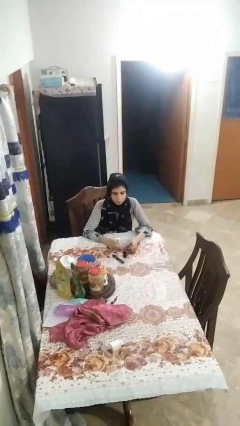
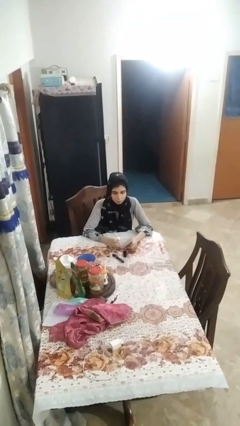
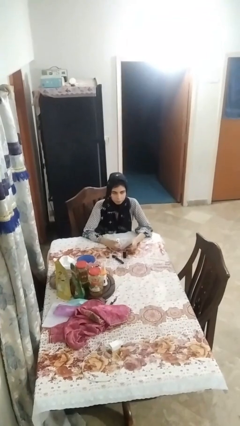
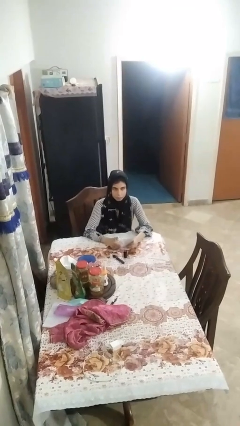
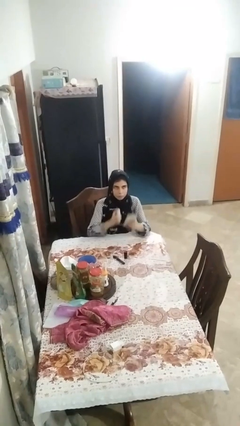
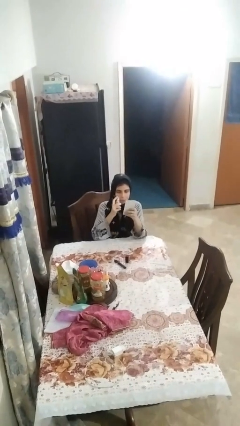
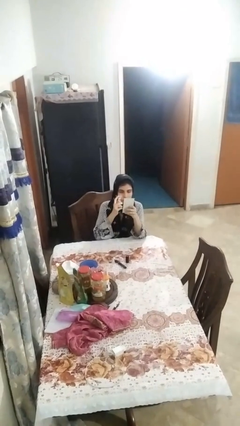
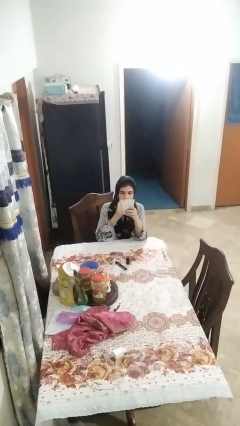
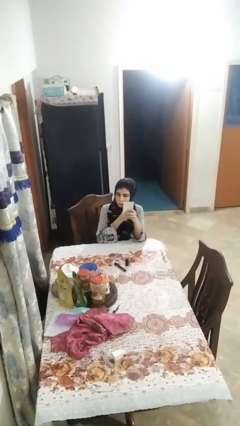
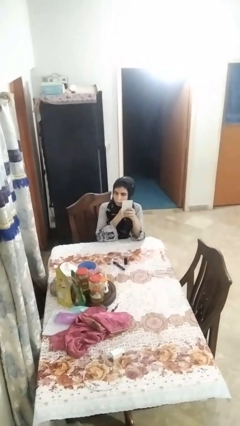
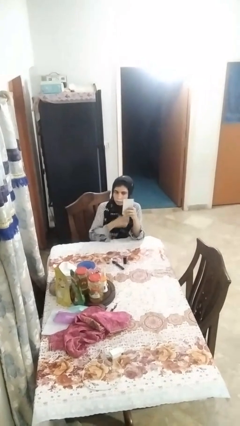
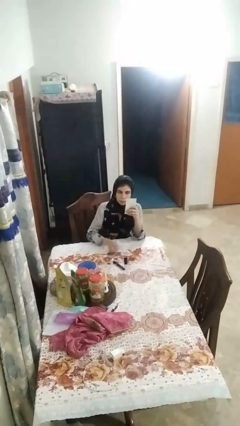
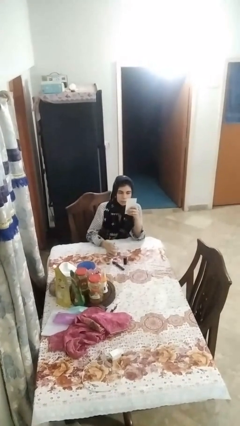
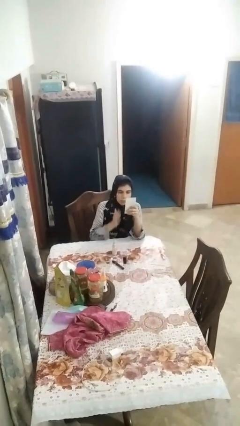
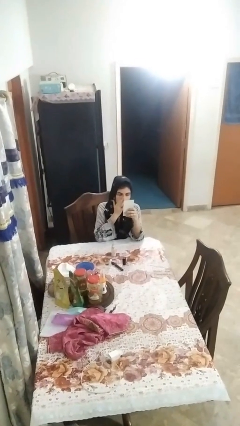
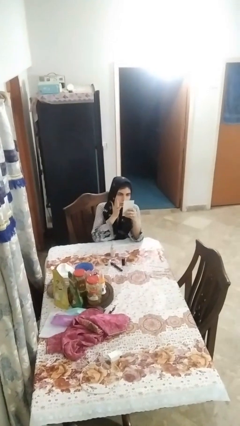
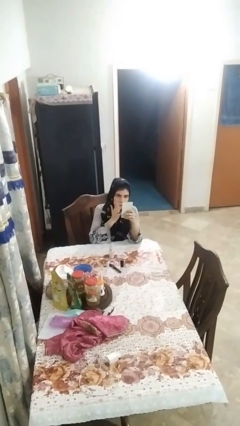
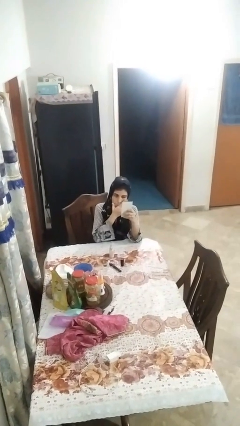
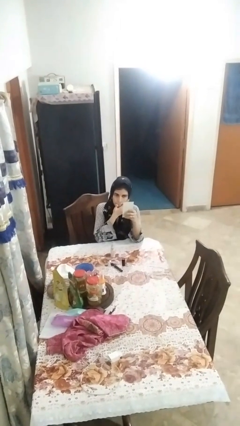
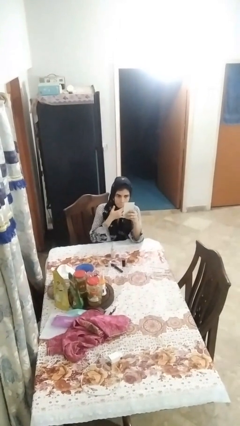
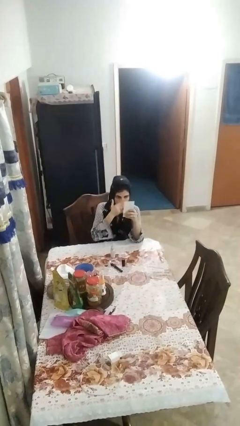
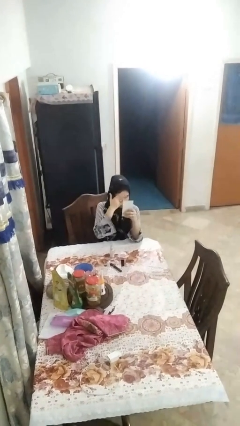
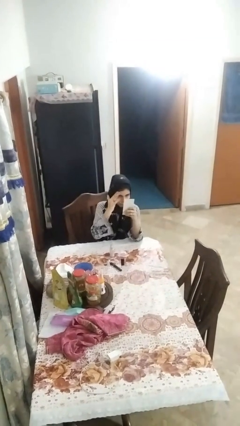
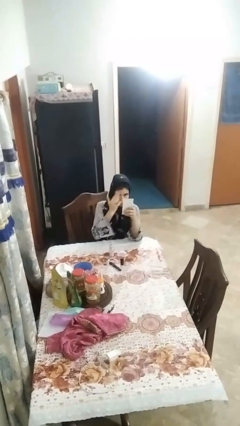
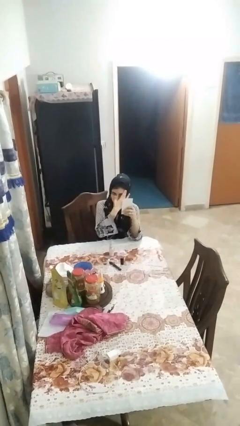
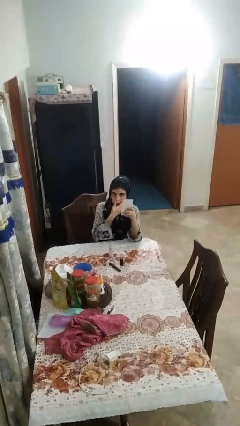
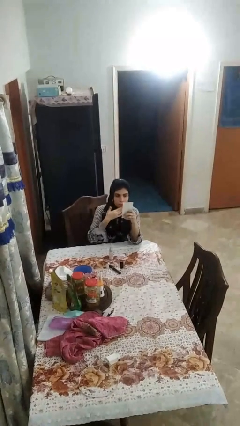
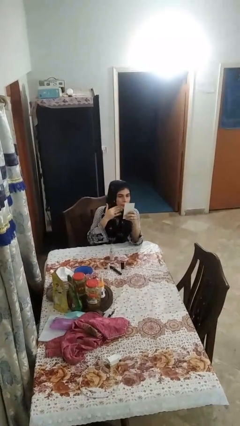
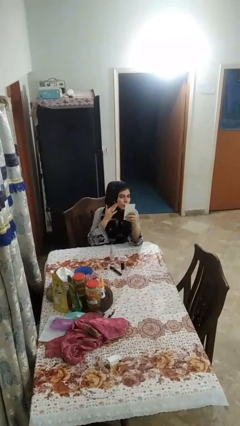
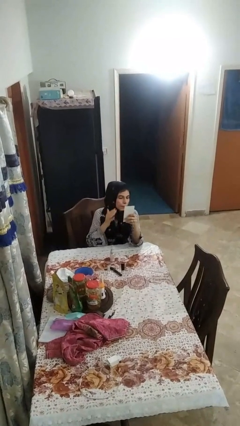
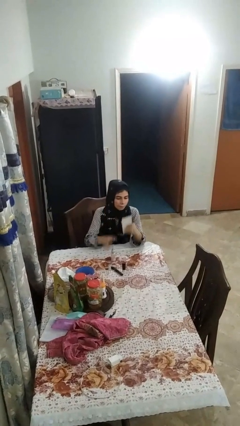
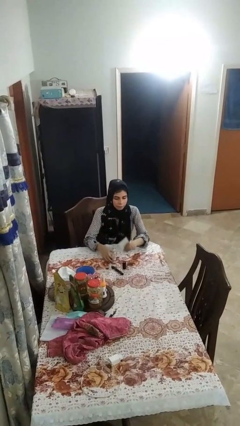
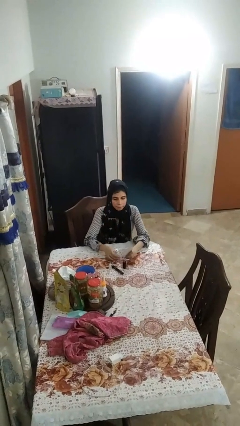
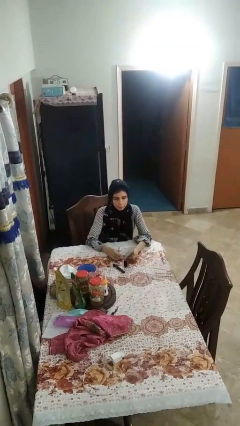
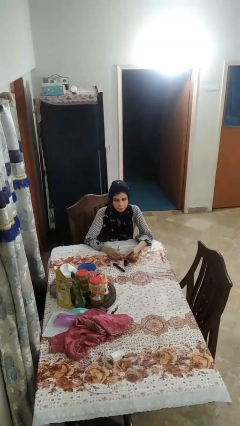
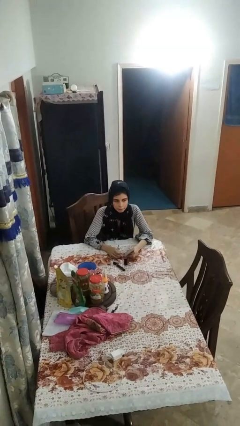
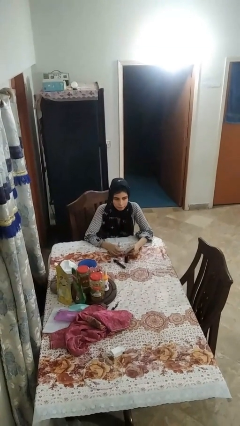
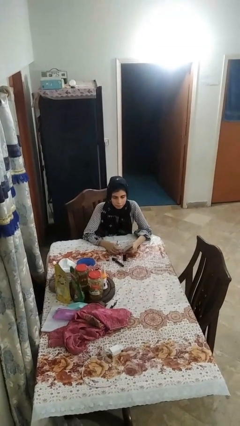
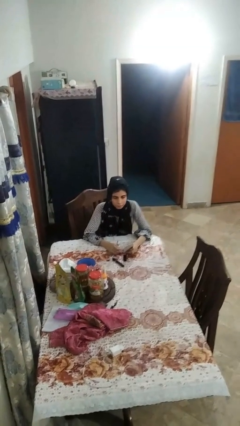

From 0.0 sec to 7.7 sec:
person applies foundation makeup

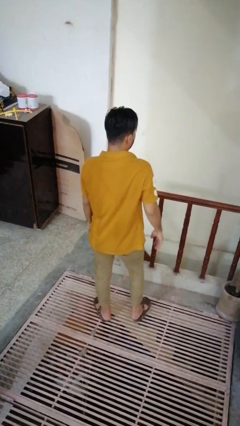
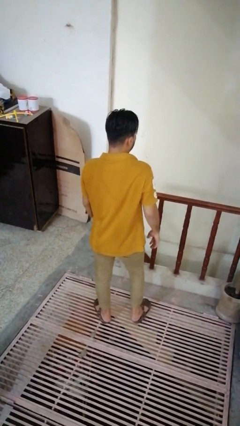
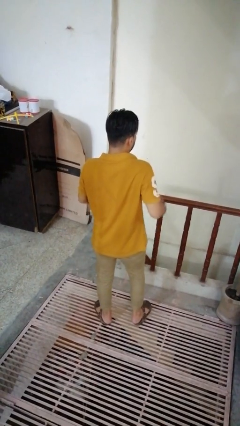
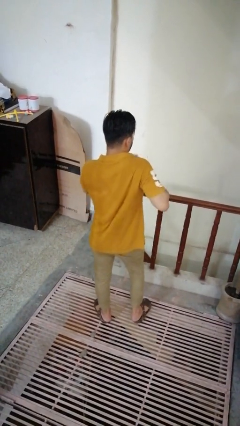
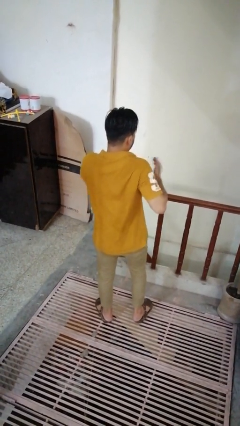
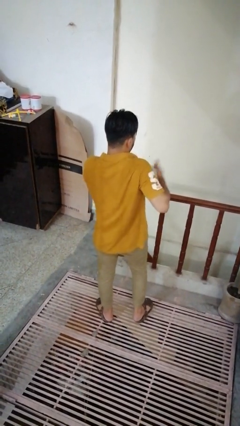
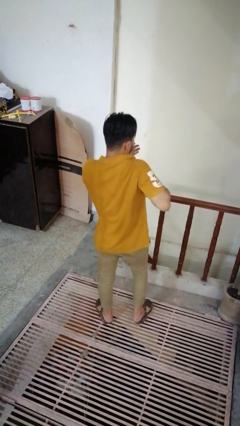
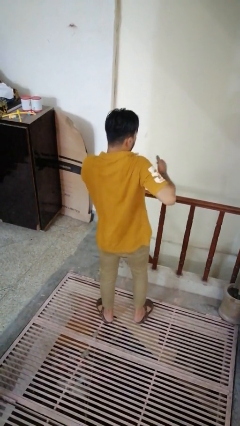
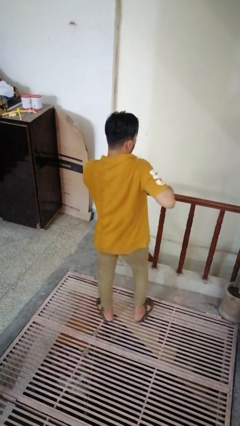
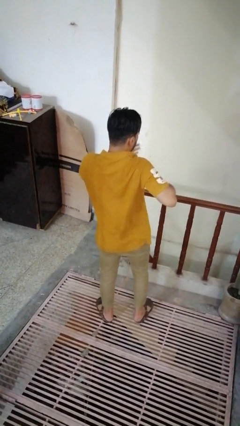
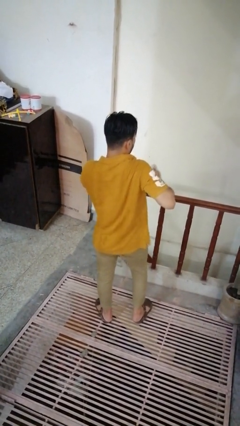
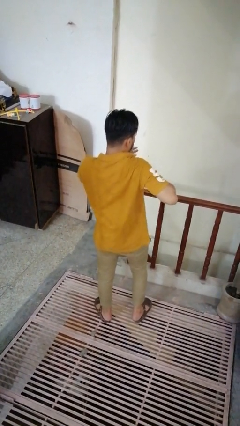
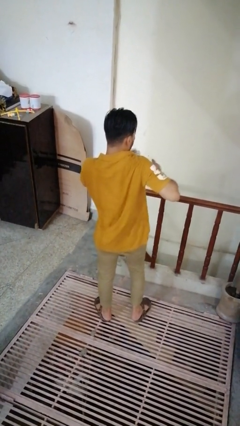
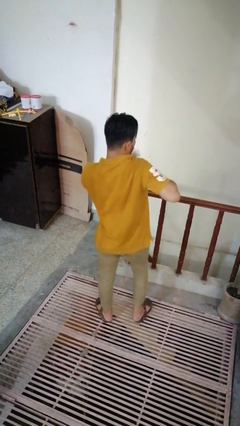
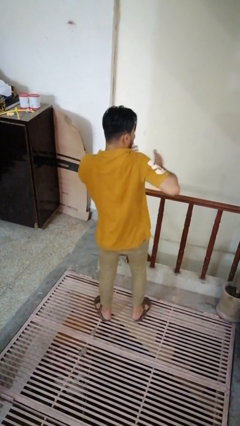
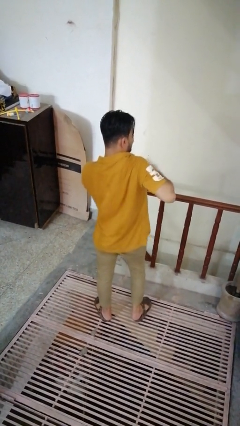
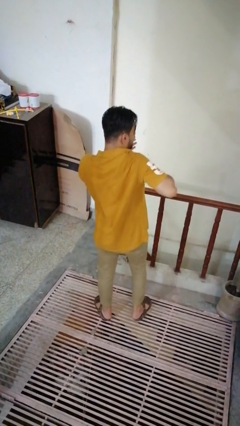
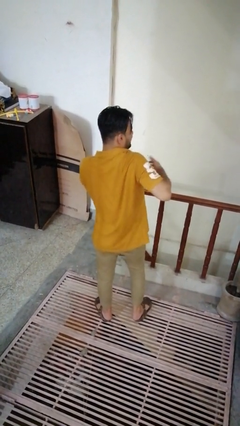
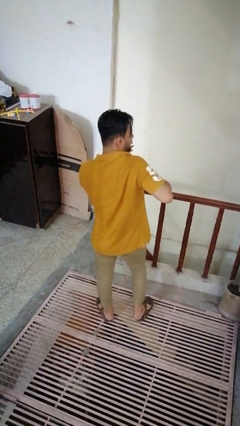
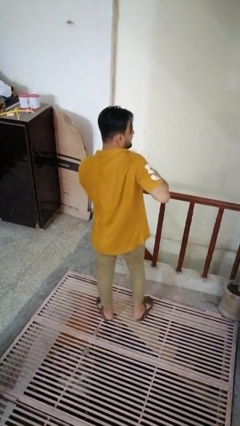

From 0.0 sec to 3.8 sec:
person drums on chest

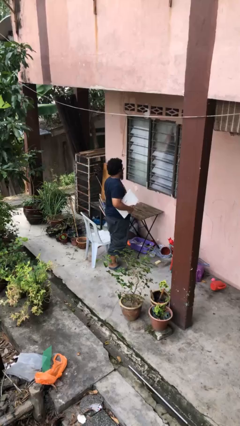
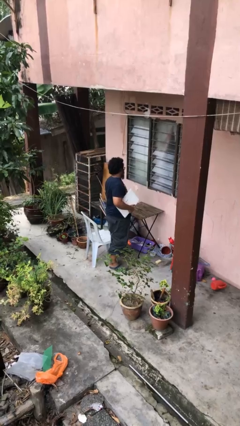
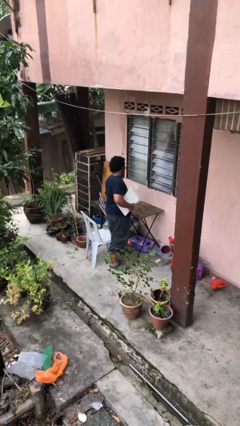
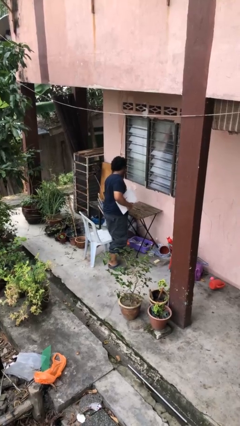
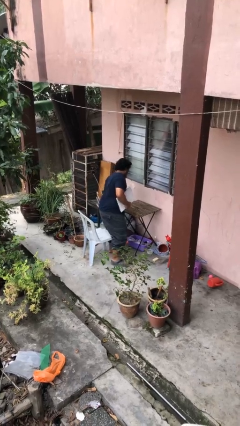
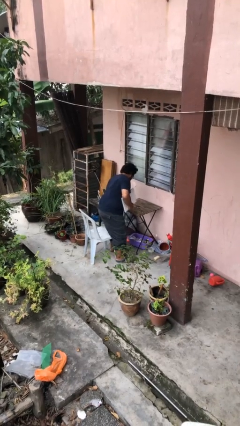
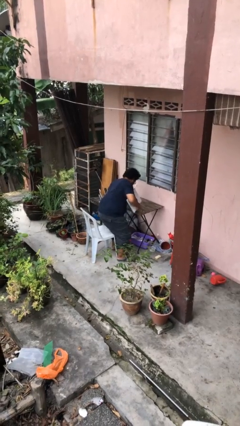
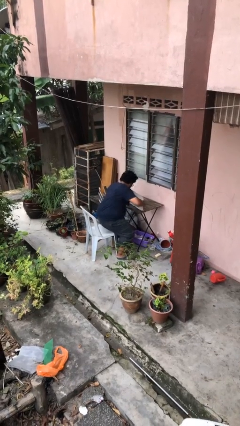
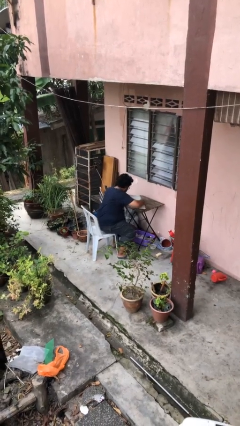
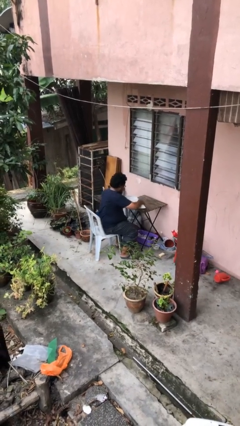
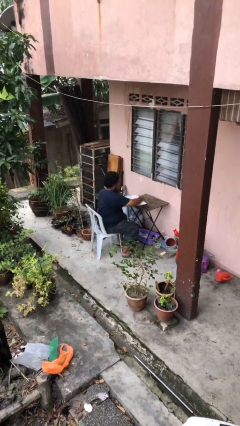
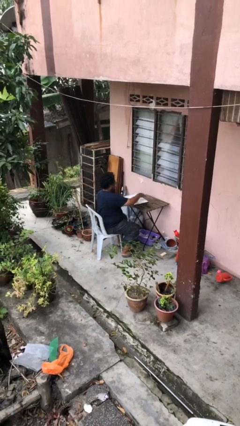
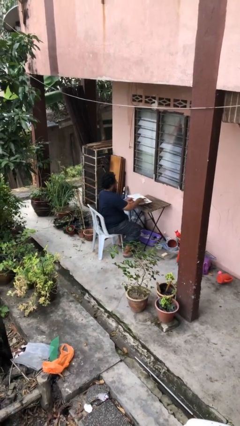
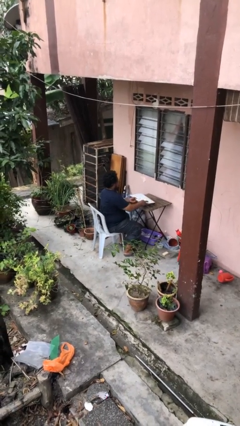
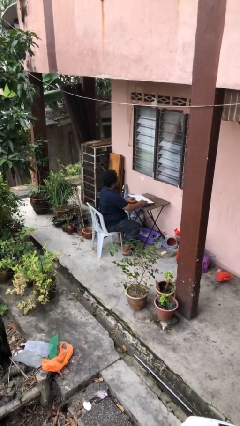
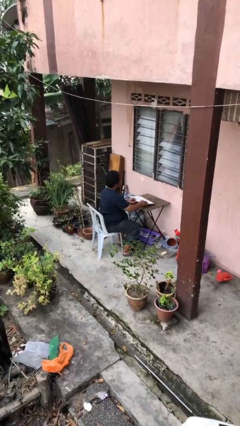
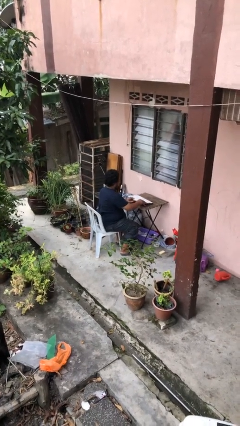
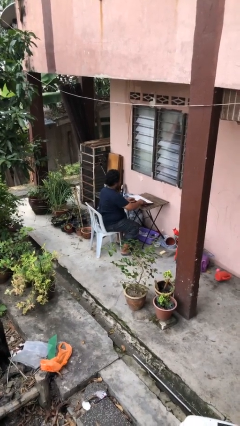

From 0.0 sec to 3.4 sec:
person sits down

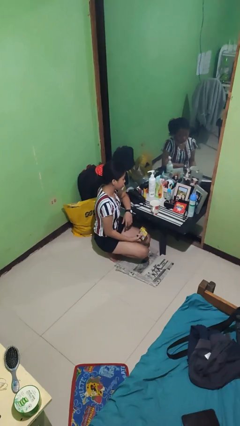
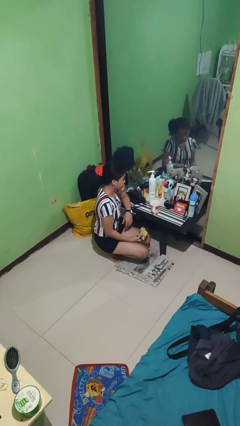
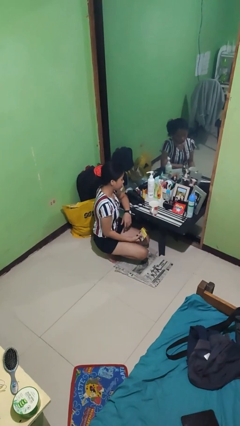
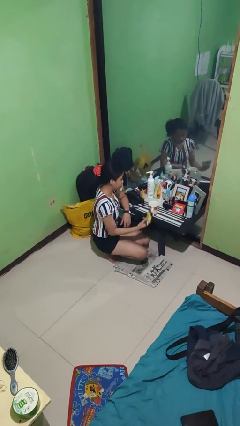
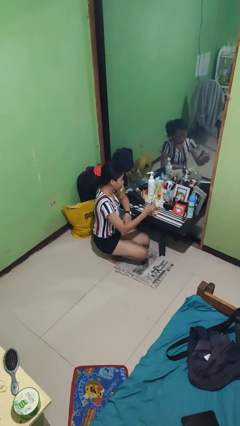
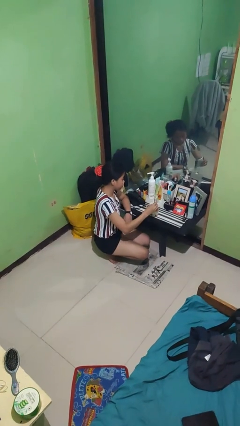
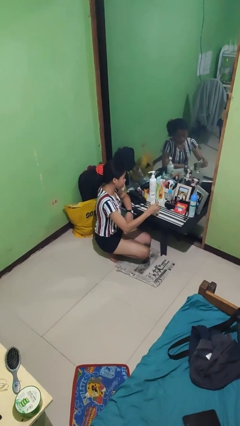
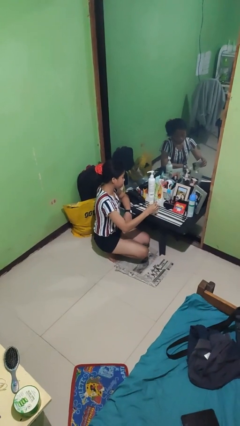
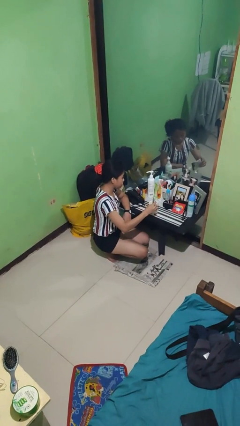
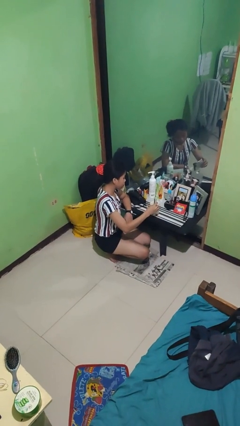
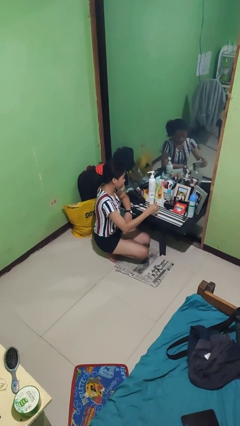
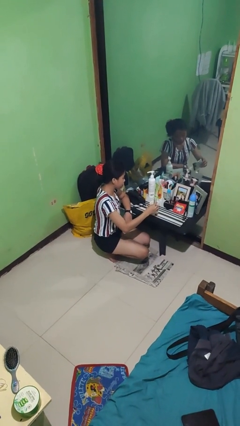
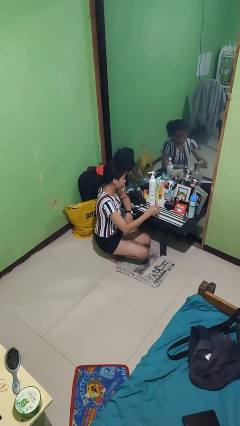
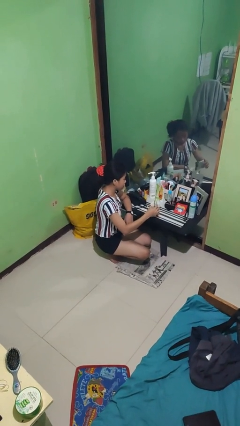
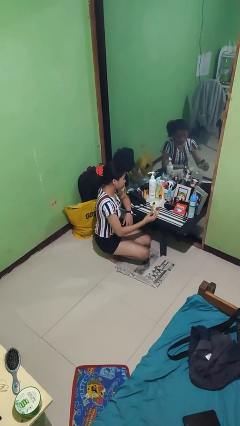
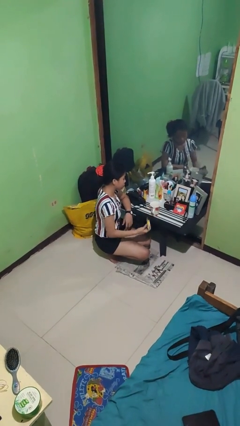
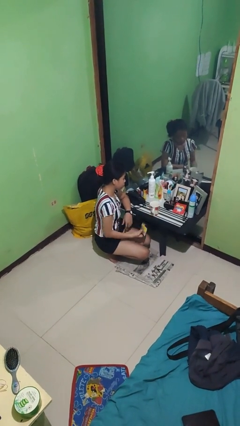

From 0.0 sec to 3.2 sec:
person pours coffee into mug
